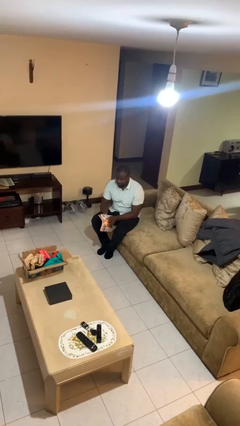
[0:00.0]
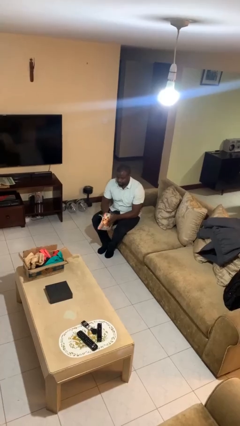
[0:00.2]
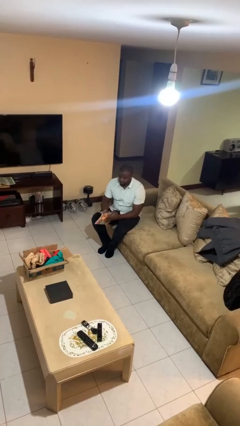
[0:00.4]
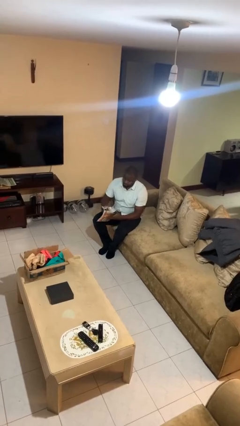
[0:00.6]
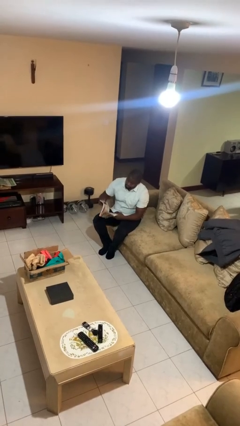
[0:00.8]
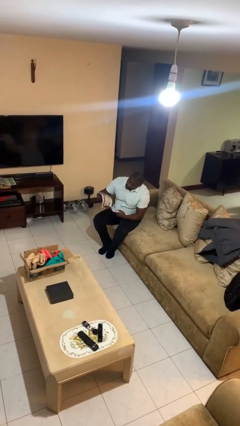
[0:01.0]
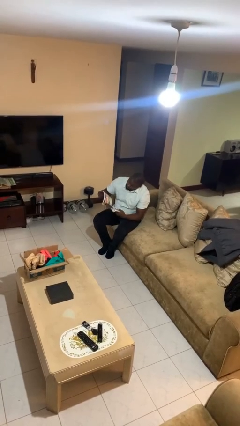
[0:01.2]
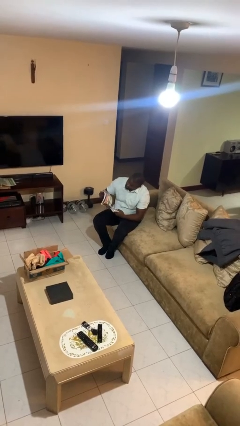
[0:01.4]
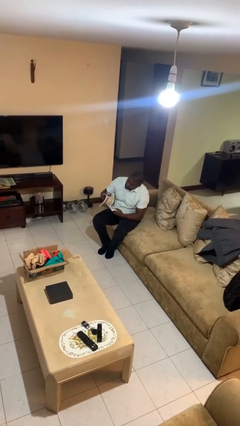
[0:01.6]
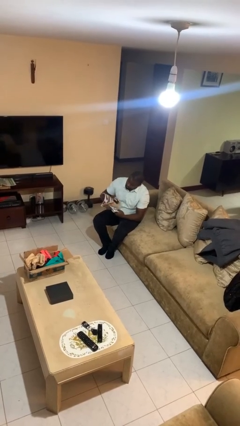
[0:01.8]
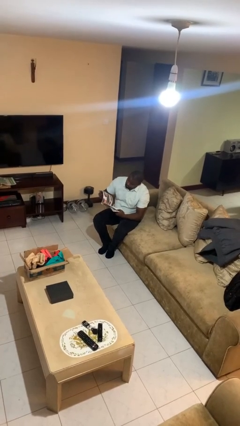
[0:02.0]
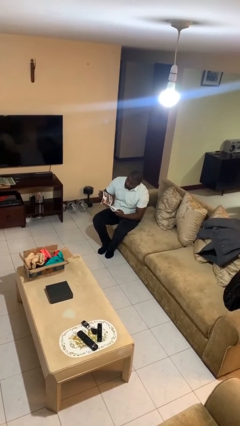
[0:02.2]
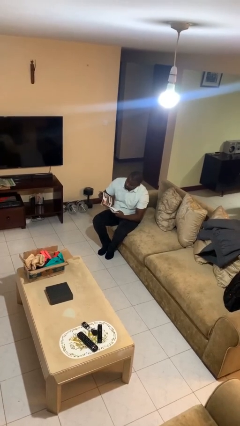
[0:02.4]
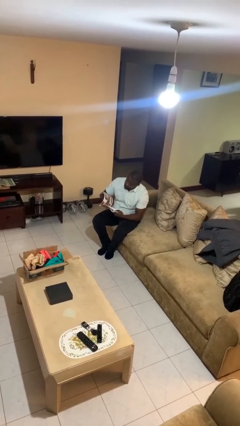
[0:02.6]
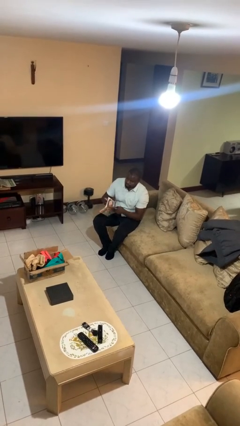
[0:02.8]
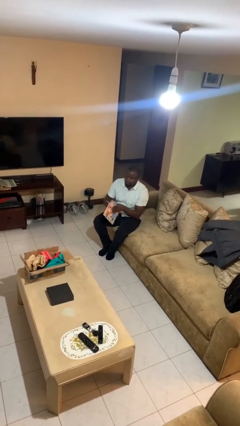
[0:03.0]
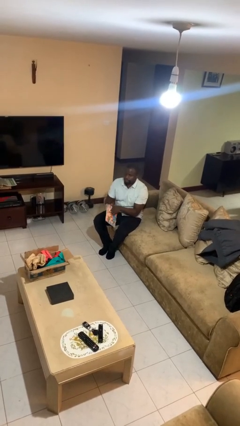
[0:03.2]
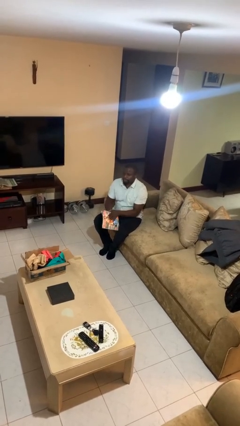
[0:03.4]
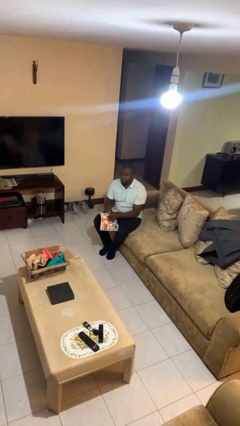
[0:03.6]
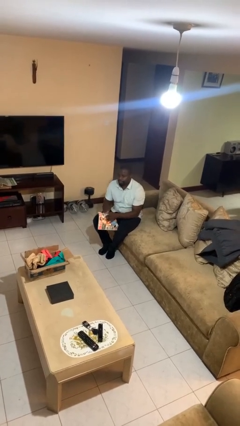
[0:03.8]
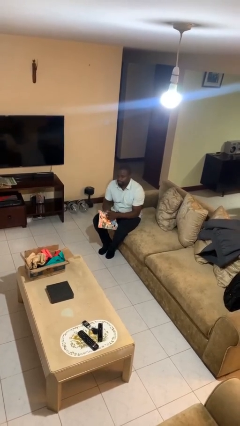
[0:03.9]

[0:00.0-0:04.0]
person reads magazine

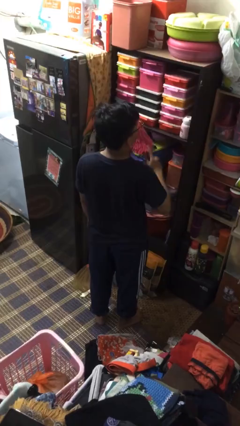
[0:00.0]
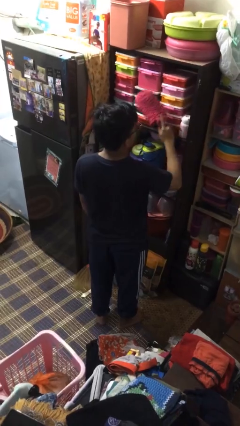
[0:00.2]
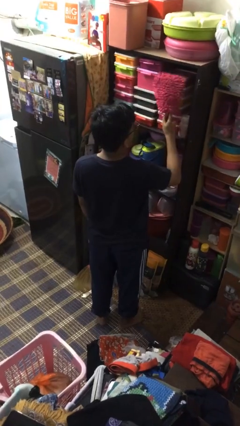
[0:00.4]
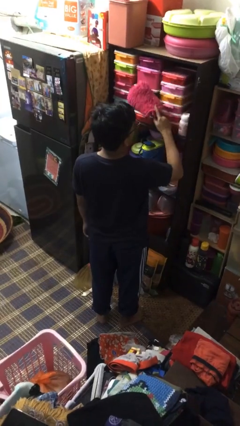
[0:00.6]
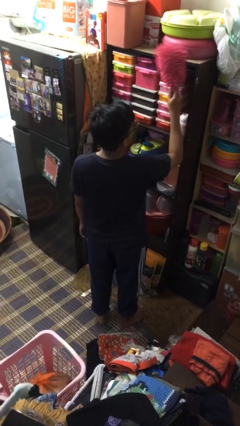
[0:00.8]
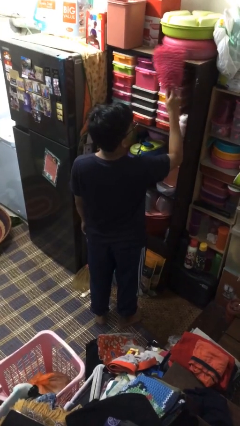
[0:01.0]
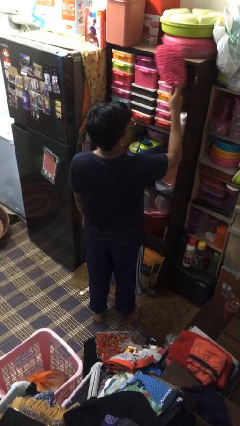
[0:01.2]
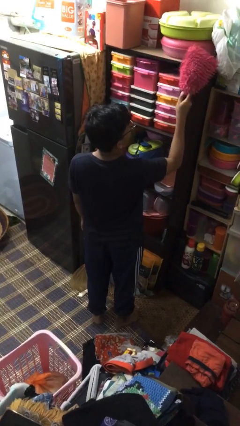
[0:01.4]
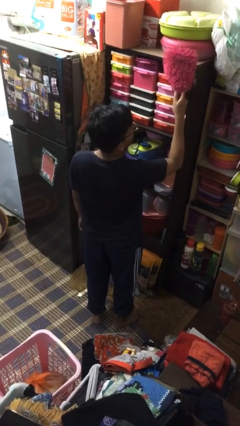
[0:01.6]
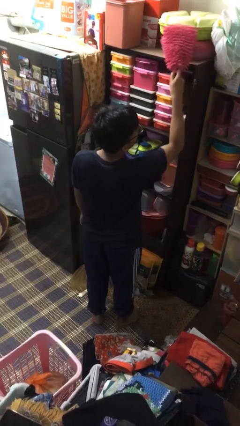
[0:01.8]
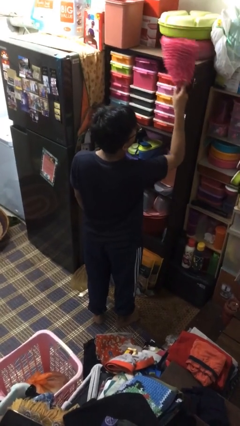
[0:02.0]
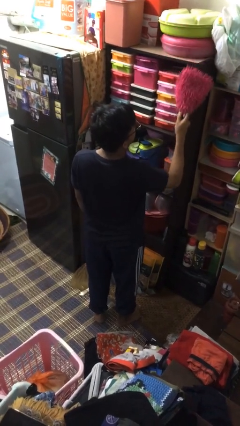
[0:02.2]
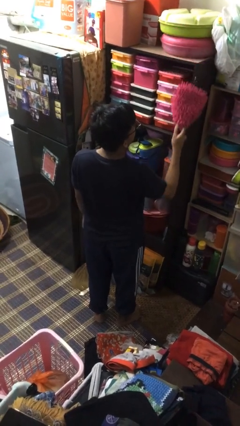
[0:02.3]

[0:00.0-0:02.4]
person dusts furniture

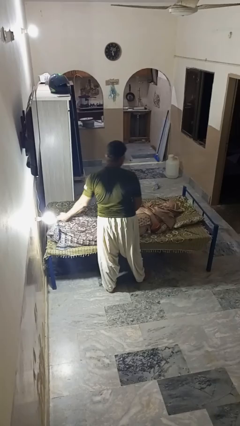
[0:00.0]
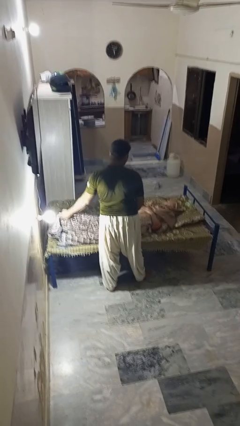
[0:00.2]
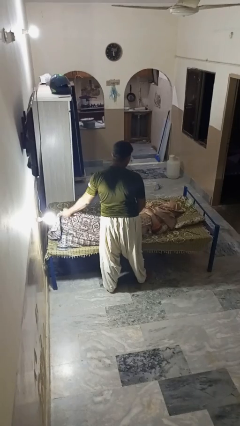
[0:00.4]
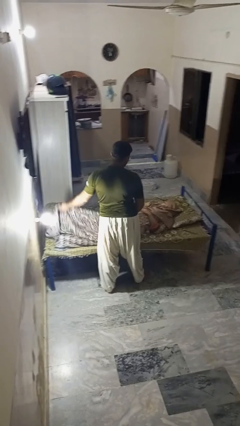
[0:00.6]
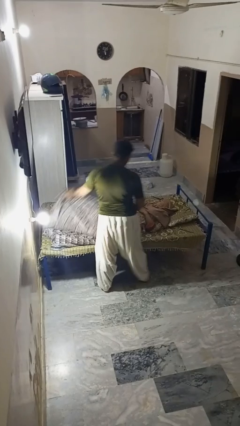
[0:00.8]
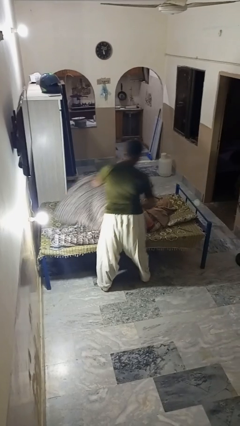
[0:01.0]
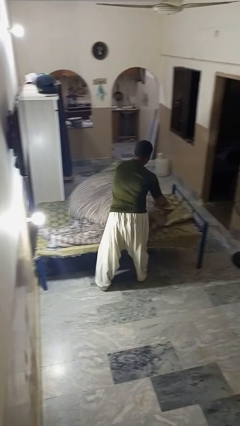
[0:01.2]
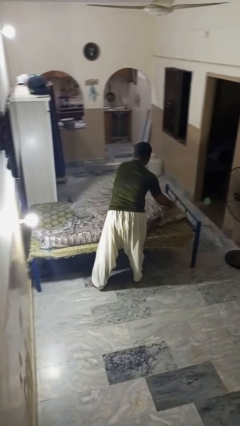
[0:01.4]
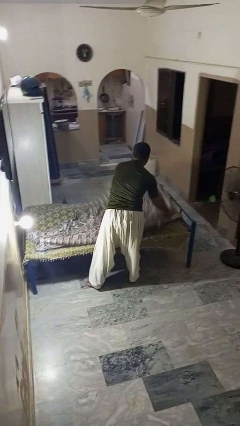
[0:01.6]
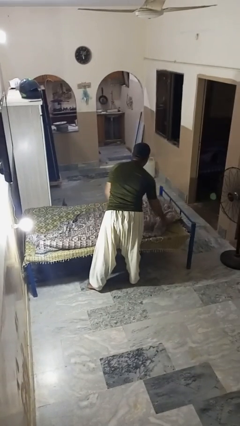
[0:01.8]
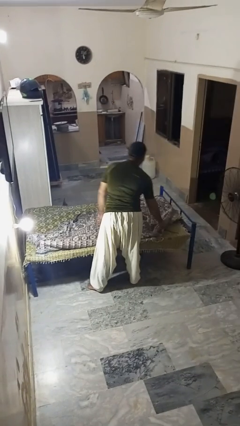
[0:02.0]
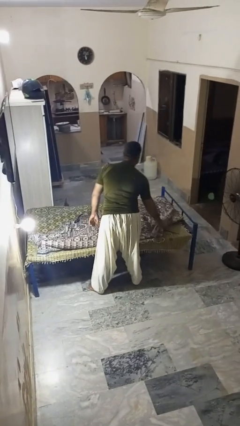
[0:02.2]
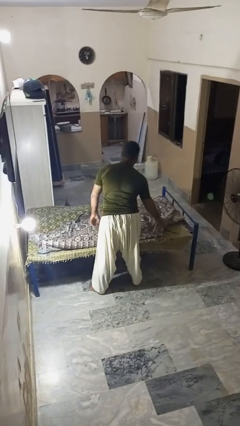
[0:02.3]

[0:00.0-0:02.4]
person covers friend with blanket

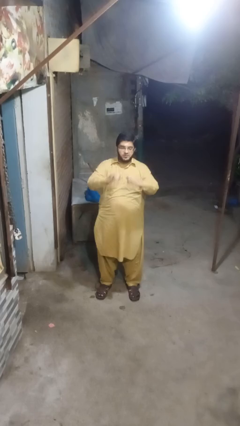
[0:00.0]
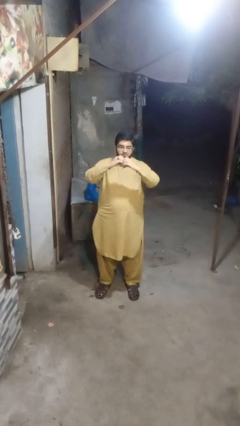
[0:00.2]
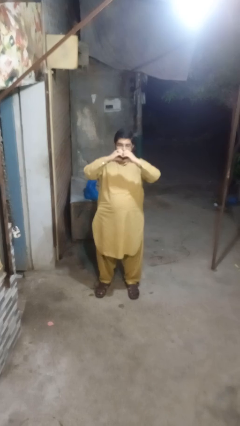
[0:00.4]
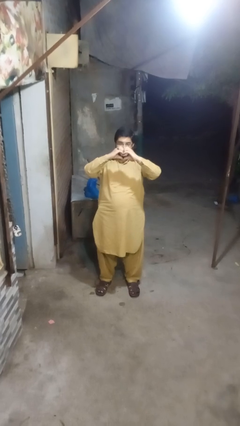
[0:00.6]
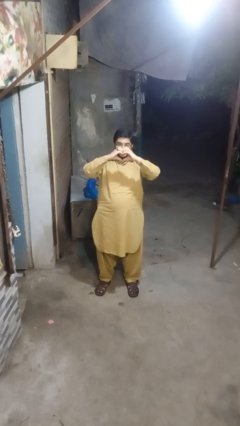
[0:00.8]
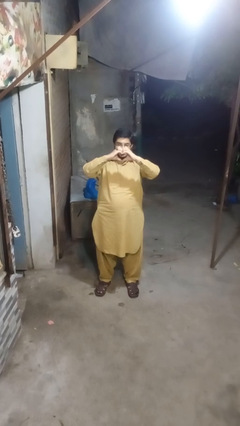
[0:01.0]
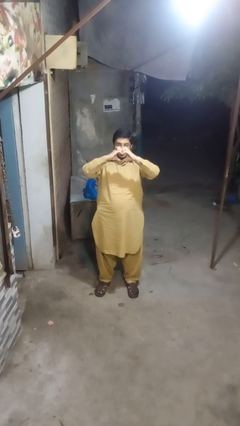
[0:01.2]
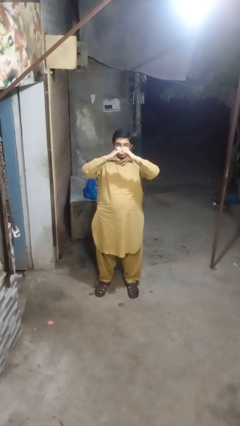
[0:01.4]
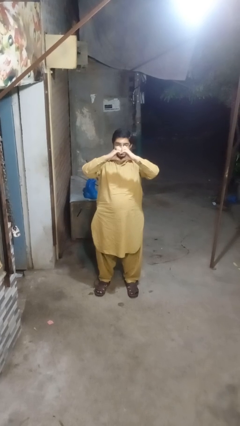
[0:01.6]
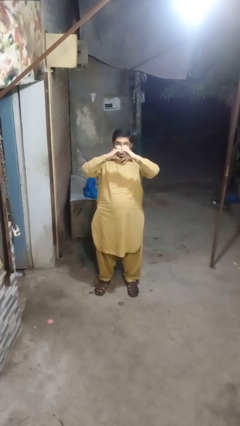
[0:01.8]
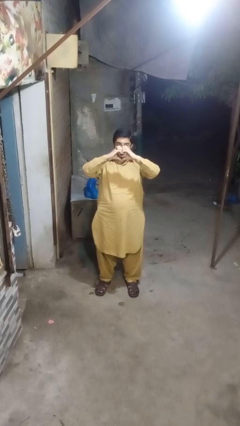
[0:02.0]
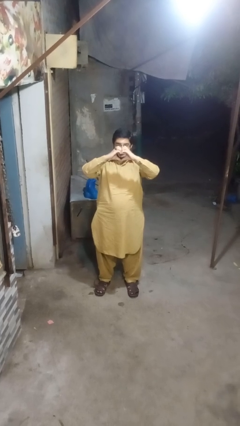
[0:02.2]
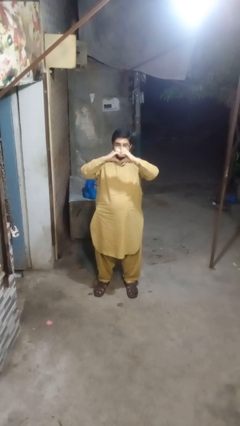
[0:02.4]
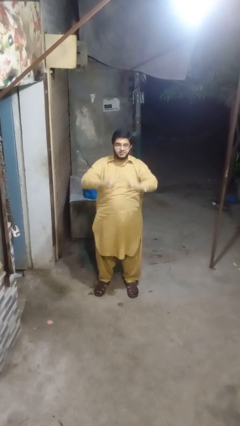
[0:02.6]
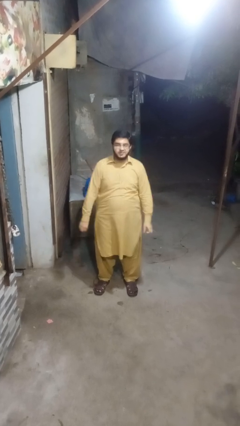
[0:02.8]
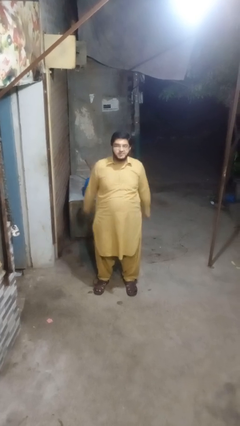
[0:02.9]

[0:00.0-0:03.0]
person gestures heart

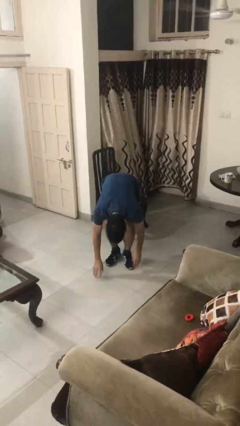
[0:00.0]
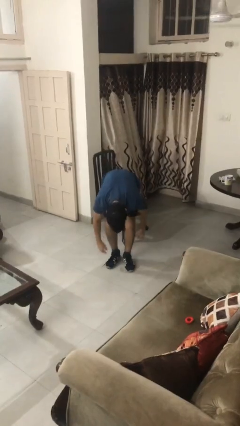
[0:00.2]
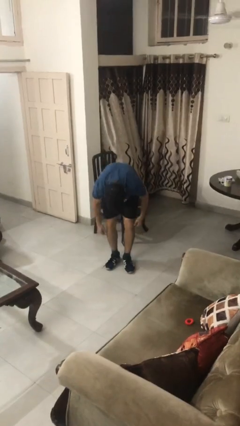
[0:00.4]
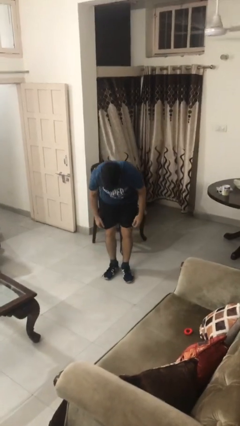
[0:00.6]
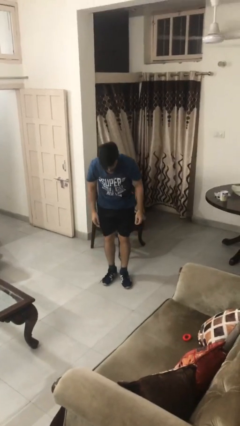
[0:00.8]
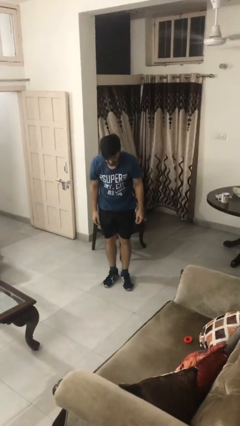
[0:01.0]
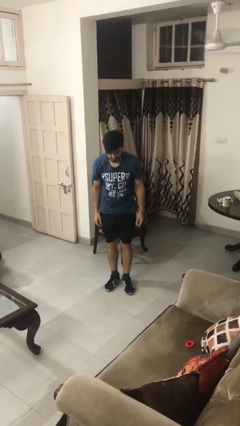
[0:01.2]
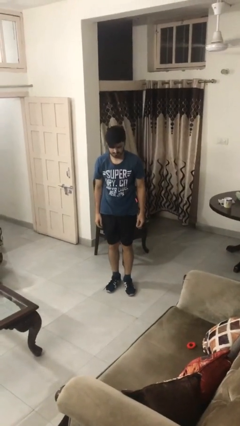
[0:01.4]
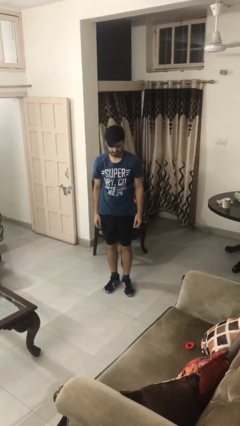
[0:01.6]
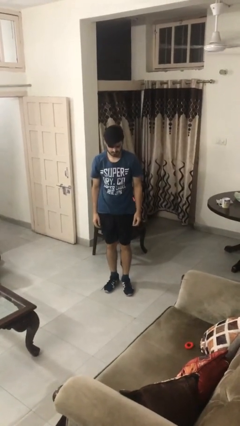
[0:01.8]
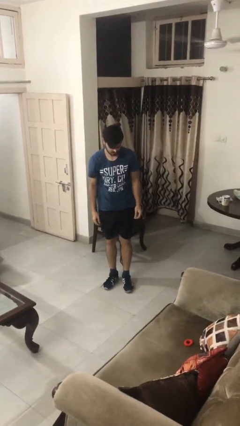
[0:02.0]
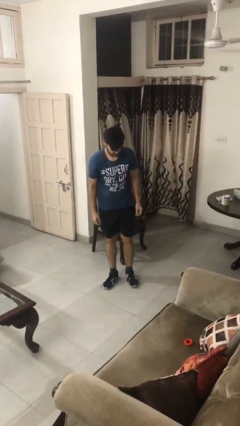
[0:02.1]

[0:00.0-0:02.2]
person stands up from floor

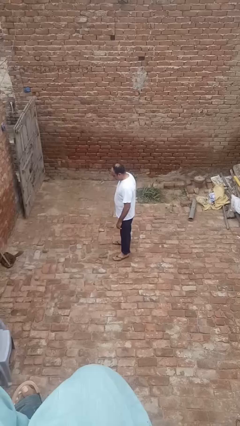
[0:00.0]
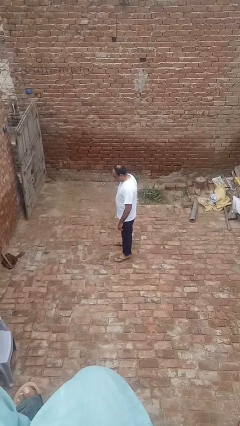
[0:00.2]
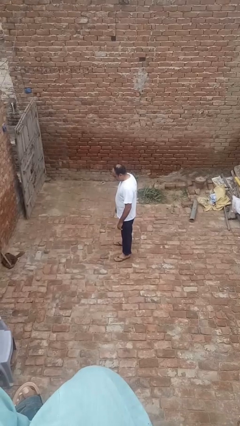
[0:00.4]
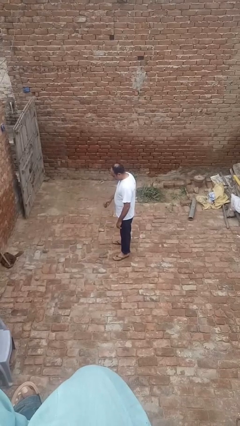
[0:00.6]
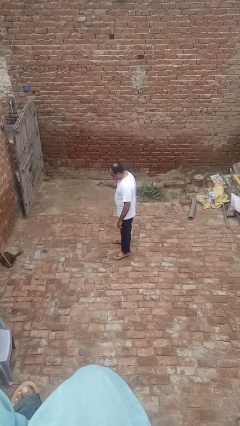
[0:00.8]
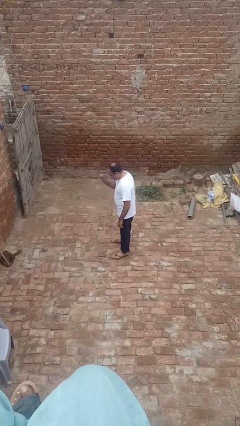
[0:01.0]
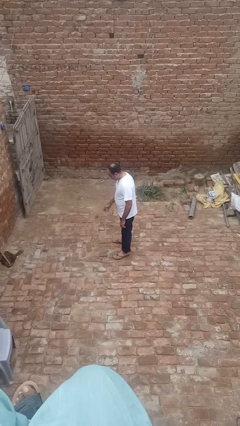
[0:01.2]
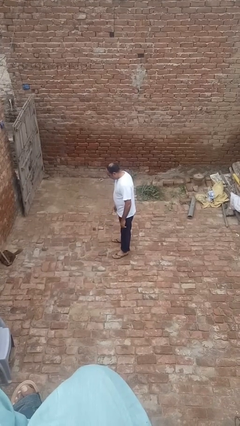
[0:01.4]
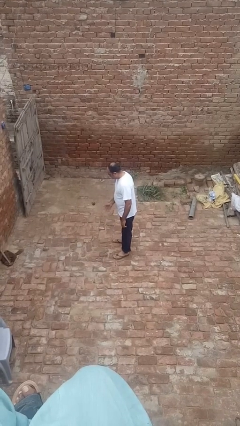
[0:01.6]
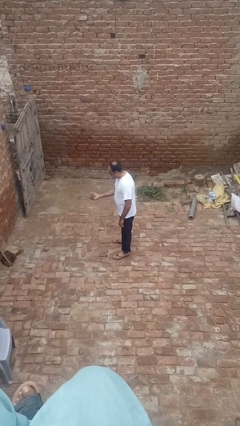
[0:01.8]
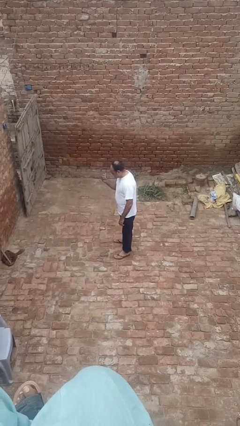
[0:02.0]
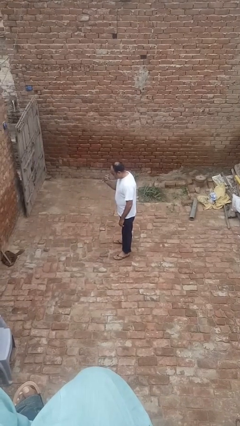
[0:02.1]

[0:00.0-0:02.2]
person bounces ball on floor

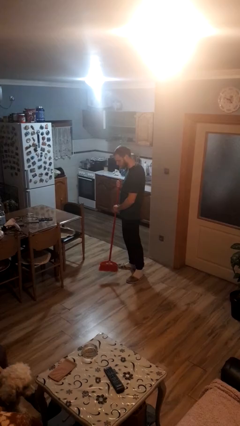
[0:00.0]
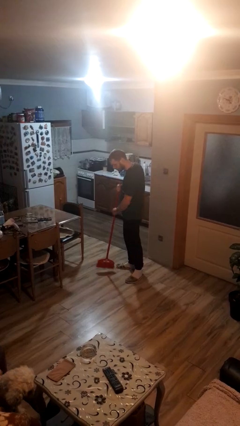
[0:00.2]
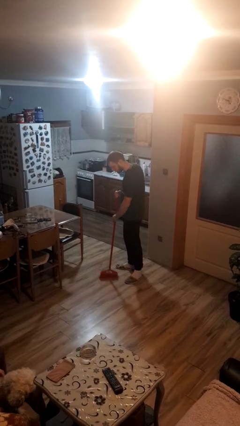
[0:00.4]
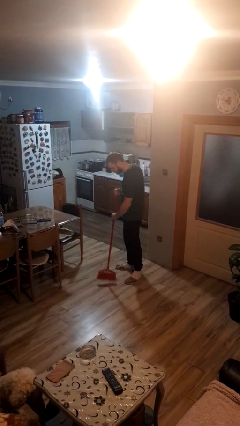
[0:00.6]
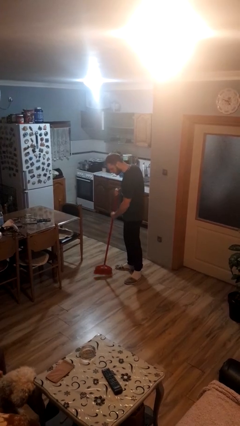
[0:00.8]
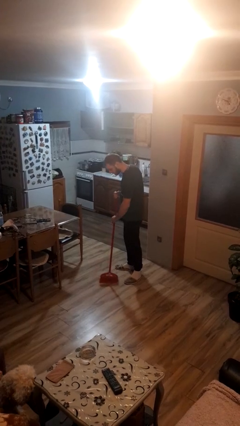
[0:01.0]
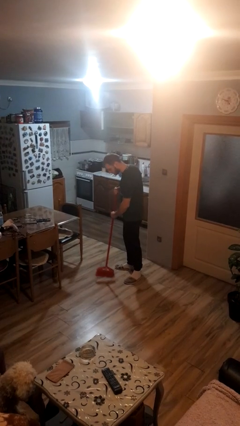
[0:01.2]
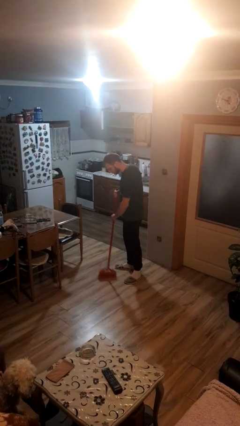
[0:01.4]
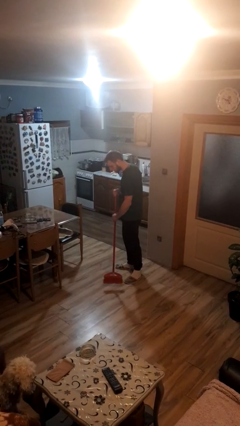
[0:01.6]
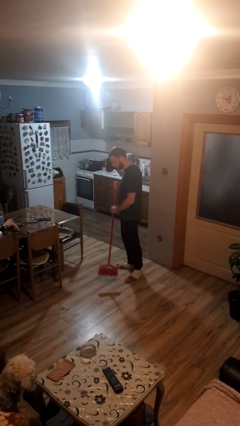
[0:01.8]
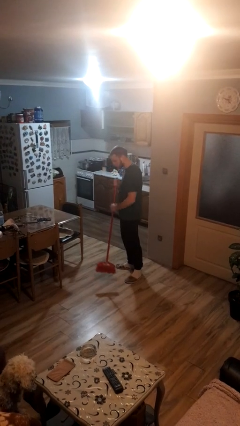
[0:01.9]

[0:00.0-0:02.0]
person sweeps floor
